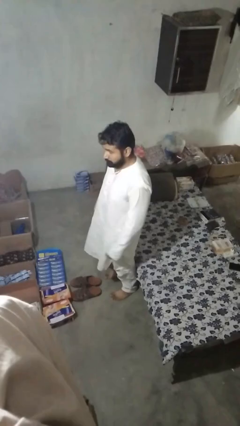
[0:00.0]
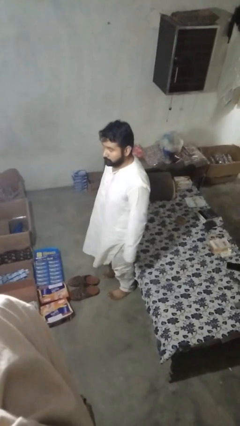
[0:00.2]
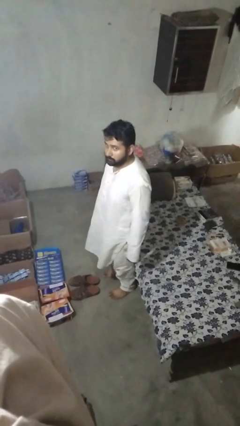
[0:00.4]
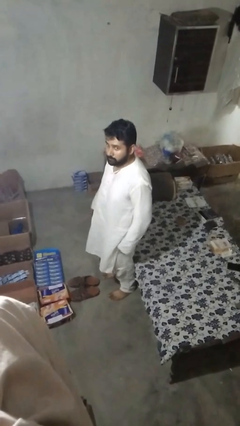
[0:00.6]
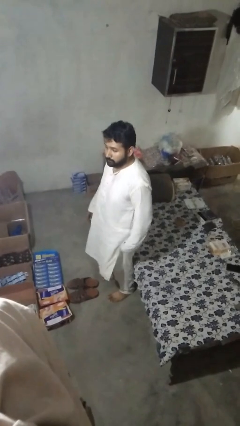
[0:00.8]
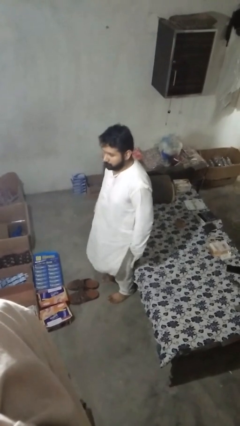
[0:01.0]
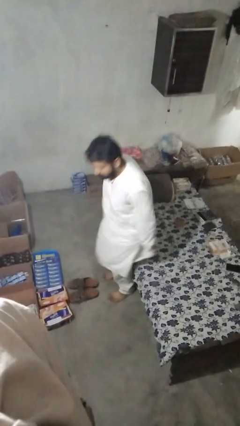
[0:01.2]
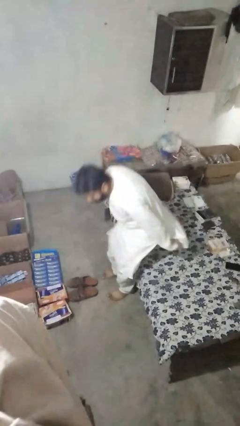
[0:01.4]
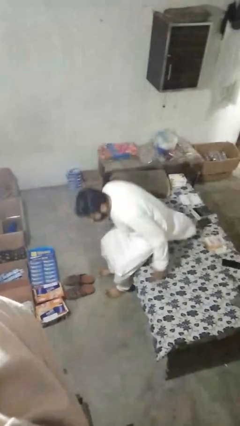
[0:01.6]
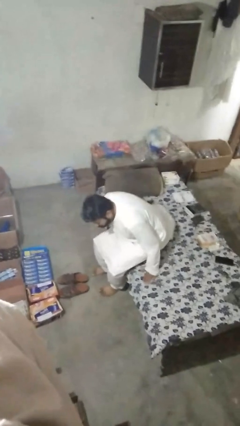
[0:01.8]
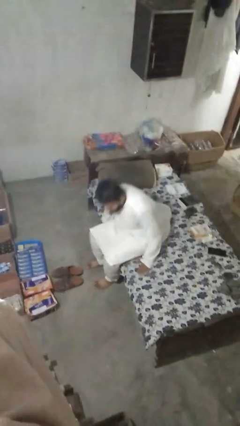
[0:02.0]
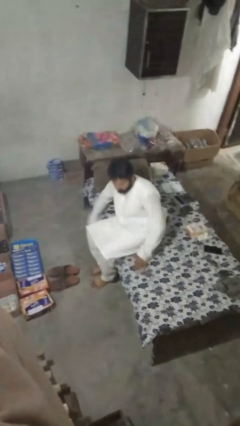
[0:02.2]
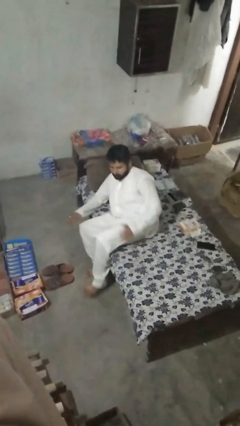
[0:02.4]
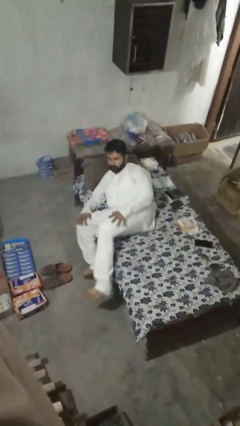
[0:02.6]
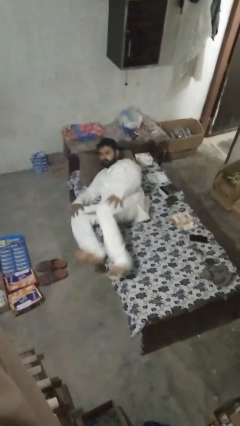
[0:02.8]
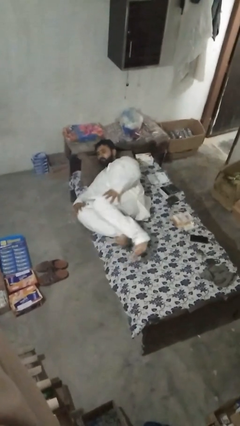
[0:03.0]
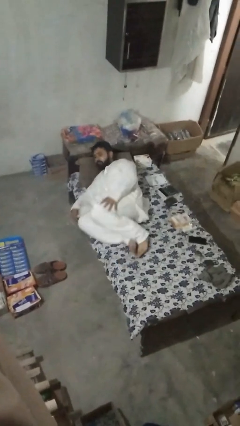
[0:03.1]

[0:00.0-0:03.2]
person lies down on bed

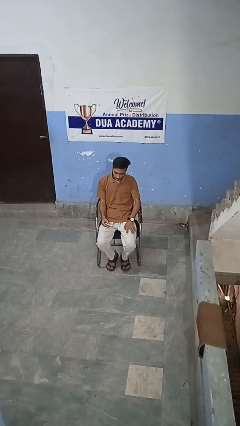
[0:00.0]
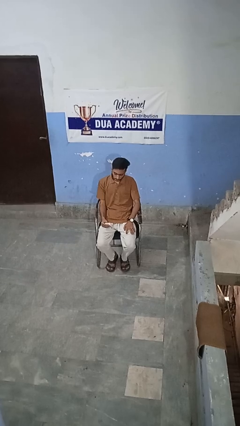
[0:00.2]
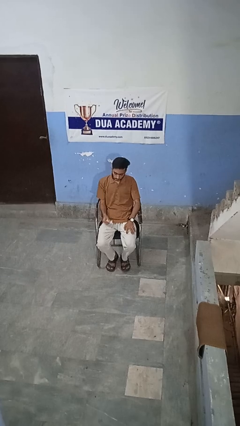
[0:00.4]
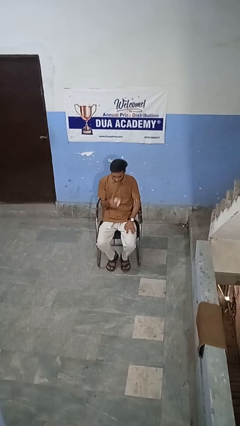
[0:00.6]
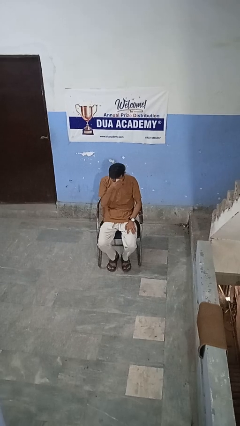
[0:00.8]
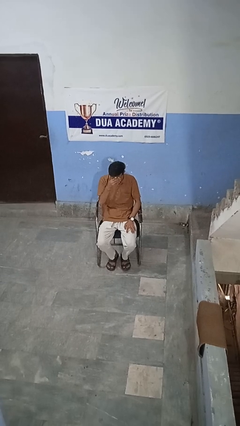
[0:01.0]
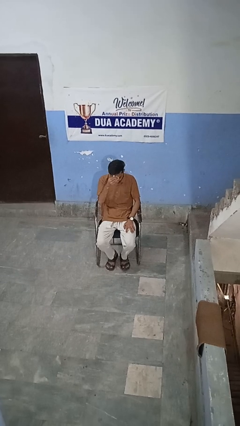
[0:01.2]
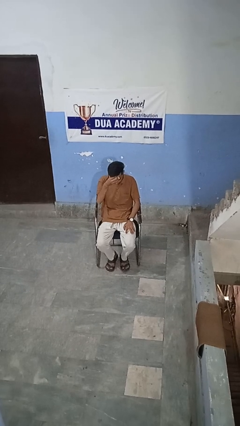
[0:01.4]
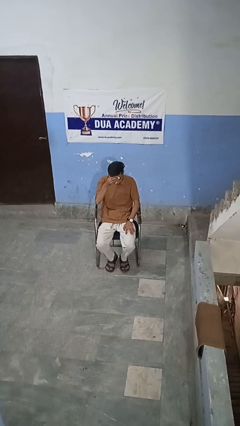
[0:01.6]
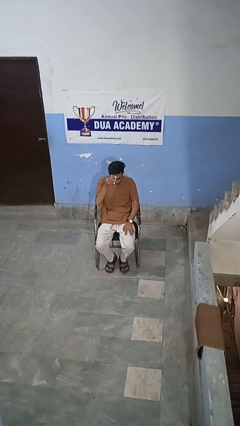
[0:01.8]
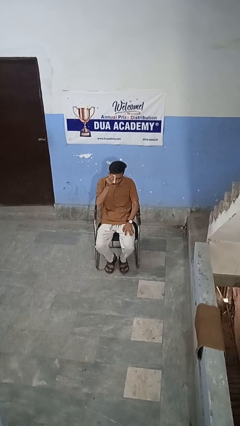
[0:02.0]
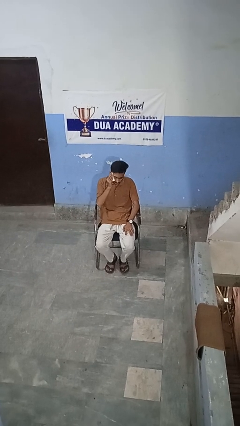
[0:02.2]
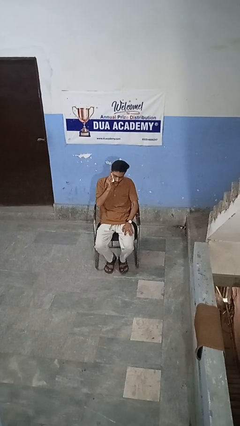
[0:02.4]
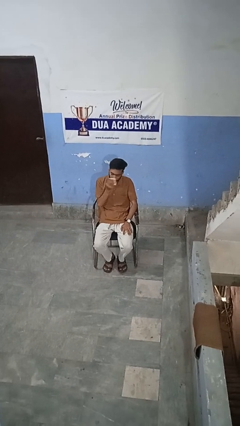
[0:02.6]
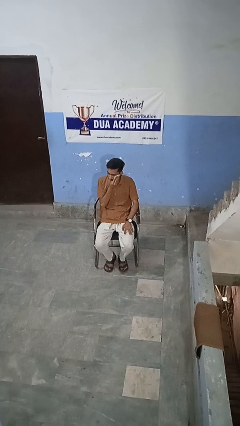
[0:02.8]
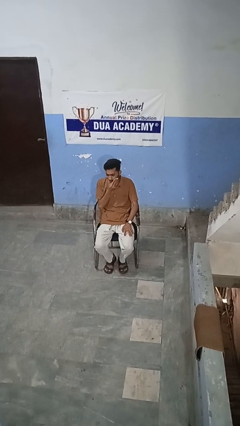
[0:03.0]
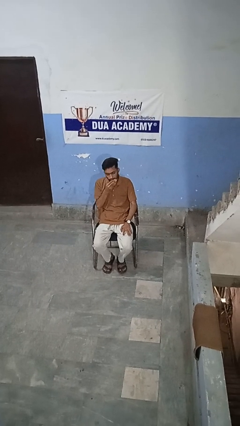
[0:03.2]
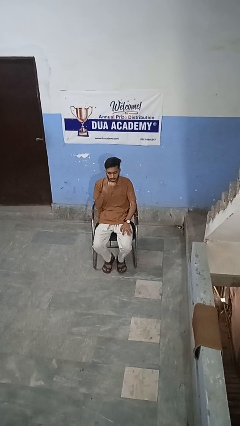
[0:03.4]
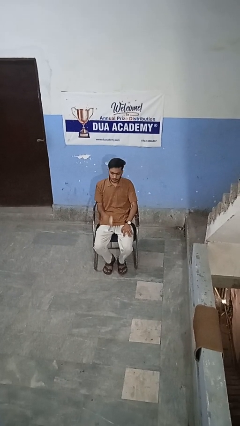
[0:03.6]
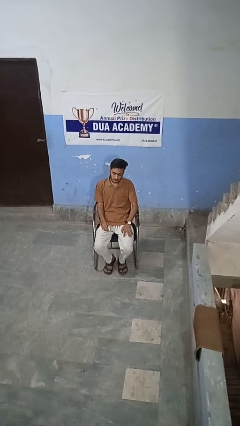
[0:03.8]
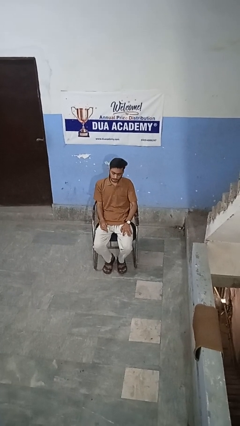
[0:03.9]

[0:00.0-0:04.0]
person wipes mouth with napkin

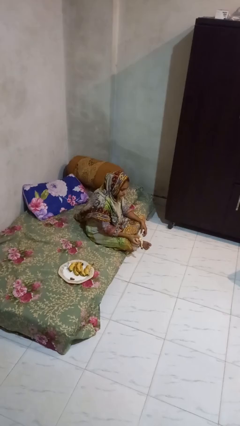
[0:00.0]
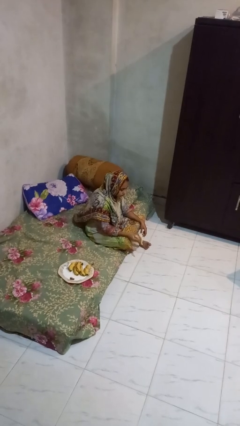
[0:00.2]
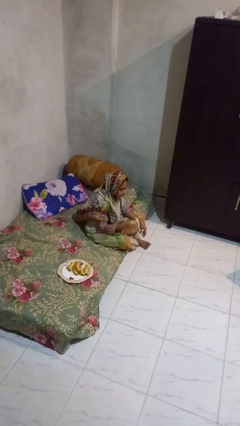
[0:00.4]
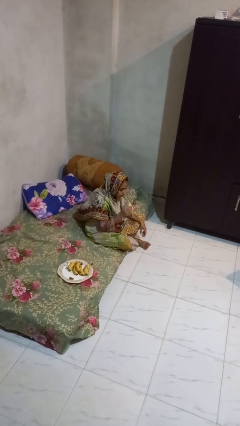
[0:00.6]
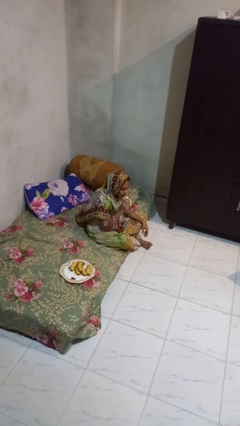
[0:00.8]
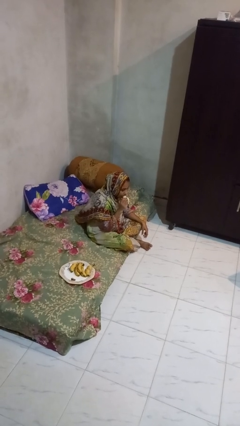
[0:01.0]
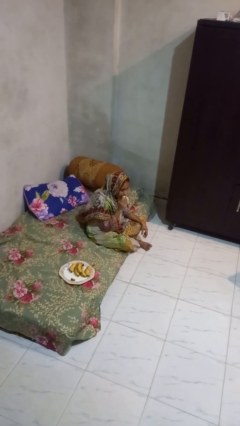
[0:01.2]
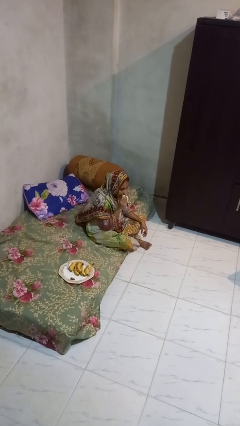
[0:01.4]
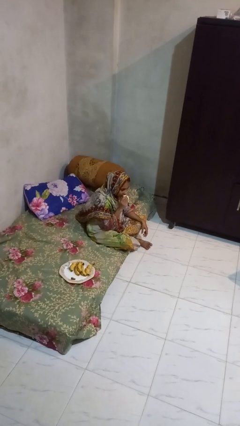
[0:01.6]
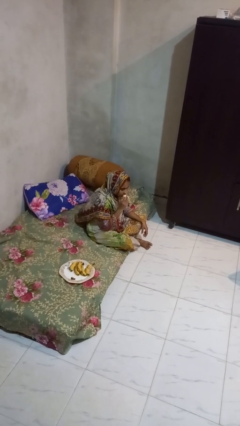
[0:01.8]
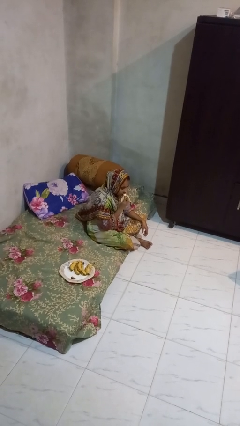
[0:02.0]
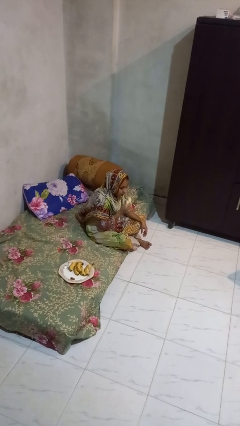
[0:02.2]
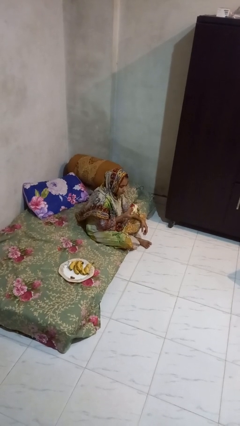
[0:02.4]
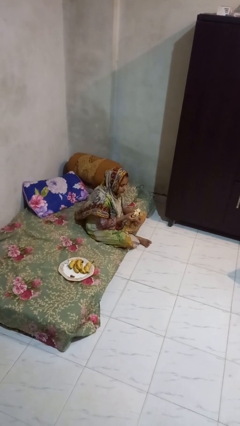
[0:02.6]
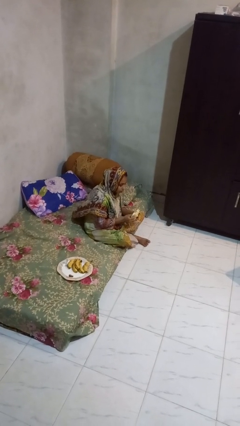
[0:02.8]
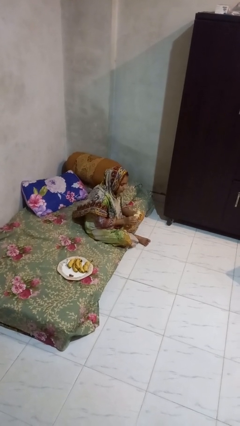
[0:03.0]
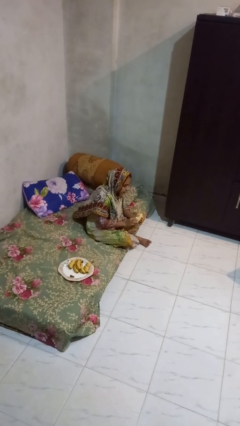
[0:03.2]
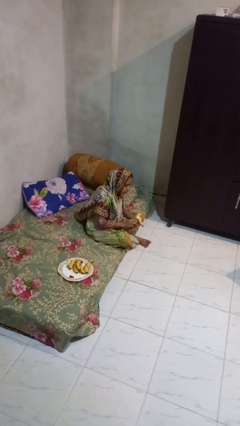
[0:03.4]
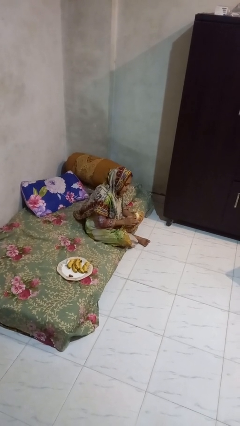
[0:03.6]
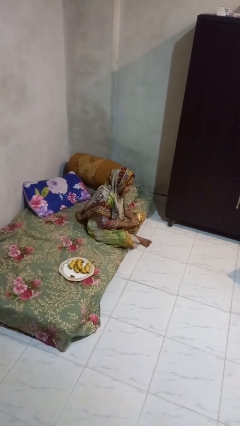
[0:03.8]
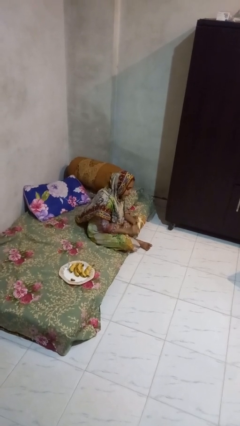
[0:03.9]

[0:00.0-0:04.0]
person eats banana

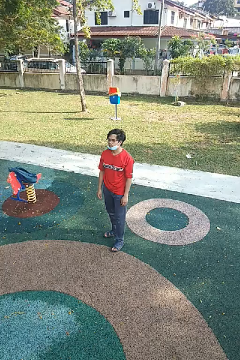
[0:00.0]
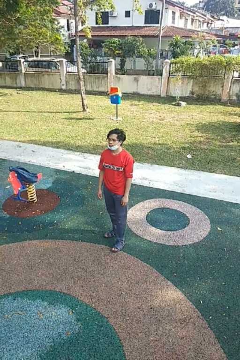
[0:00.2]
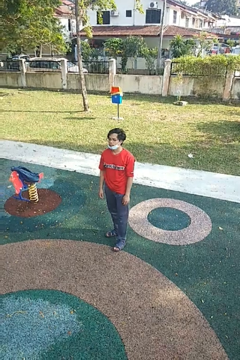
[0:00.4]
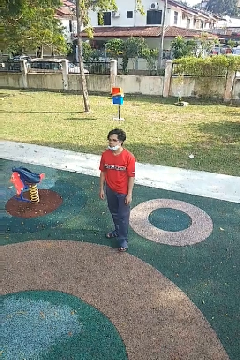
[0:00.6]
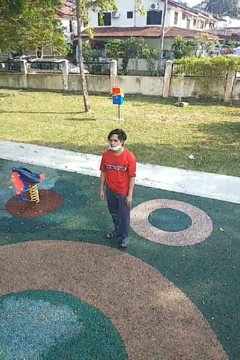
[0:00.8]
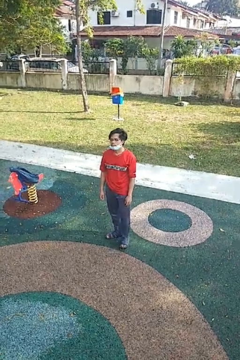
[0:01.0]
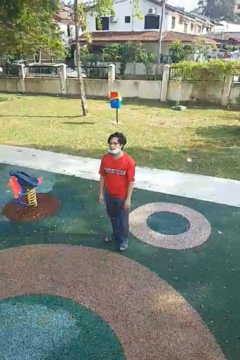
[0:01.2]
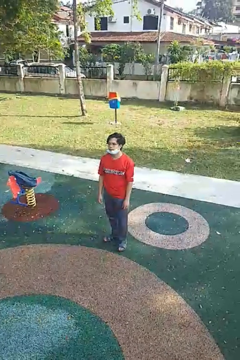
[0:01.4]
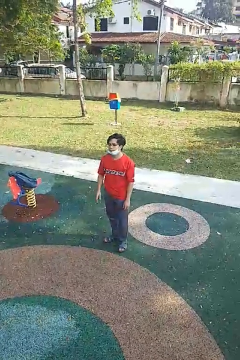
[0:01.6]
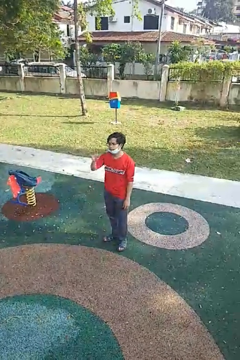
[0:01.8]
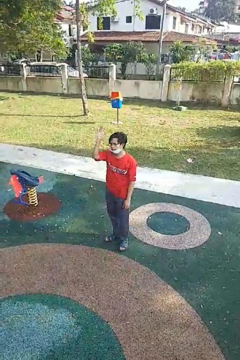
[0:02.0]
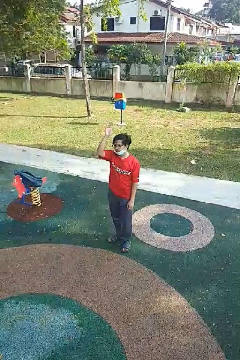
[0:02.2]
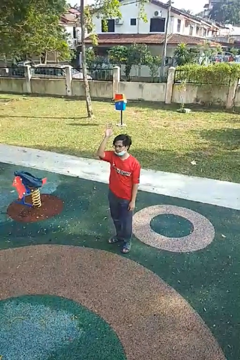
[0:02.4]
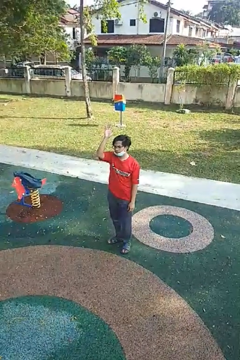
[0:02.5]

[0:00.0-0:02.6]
person gestures raise hand

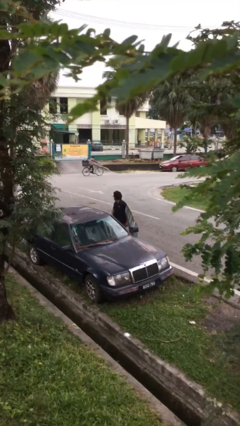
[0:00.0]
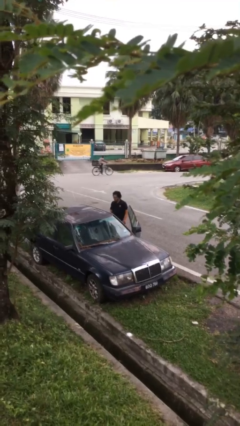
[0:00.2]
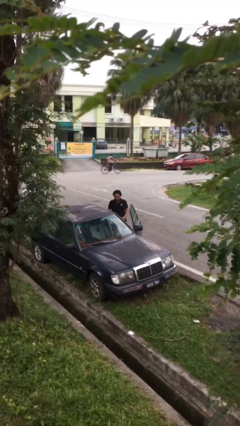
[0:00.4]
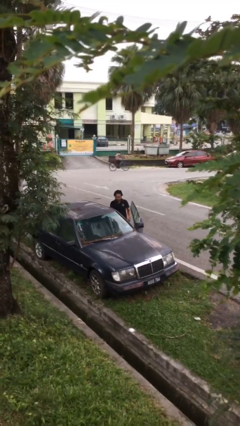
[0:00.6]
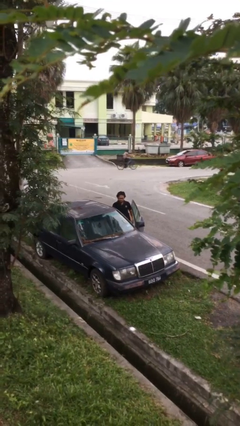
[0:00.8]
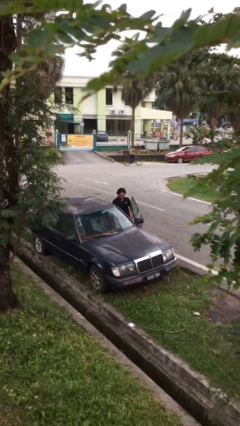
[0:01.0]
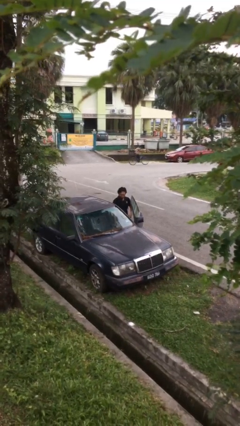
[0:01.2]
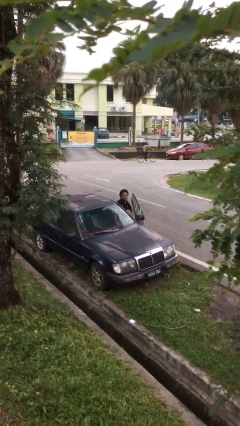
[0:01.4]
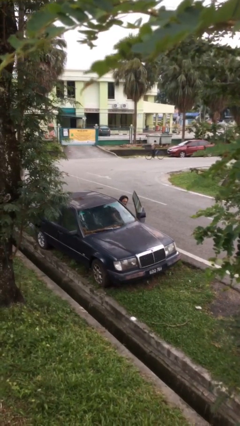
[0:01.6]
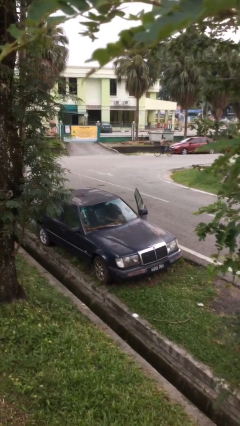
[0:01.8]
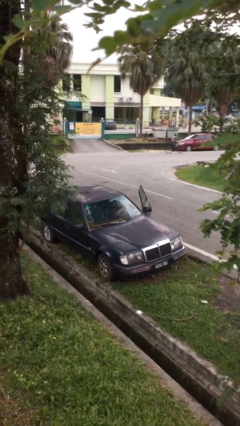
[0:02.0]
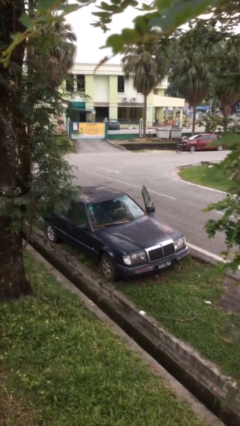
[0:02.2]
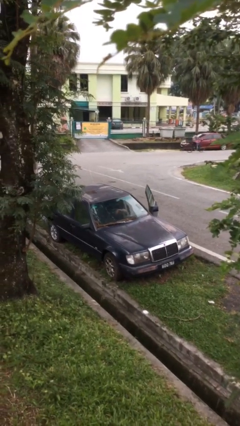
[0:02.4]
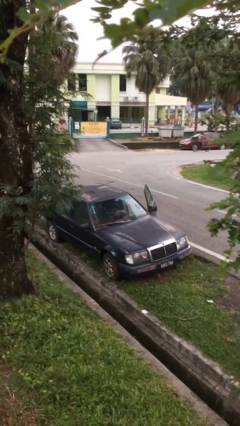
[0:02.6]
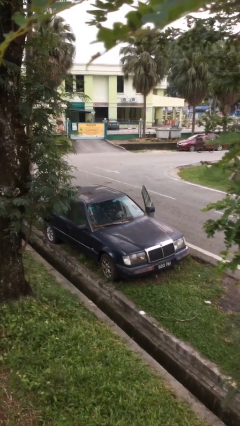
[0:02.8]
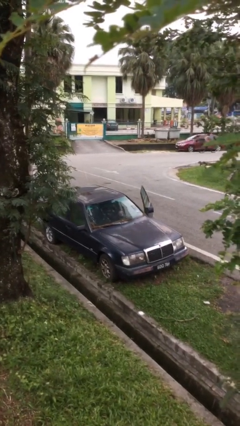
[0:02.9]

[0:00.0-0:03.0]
person enters car

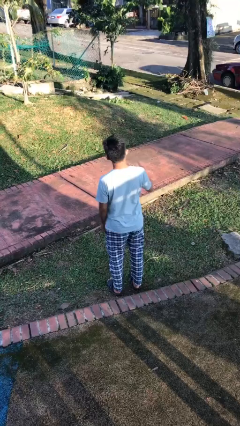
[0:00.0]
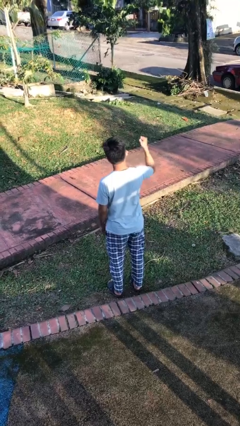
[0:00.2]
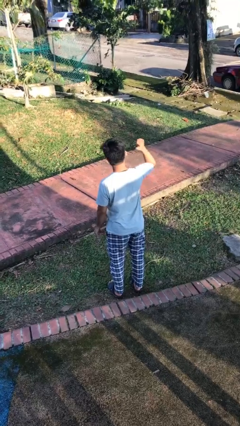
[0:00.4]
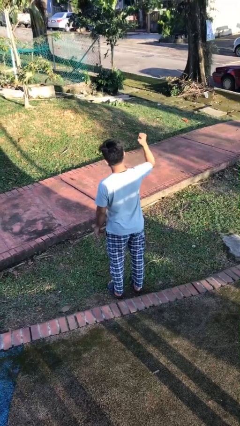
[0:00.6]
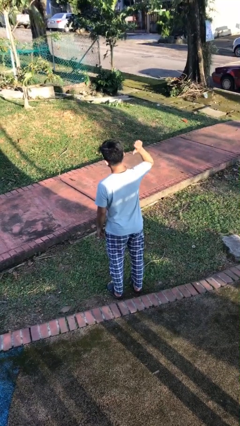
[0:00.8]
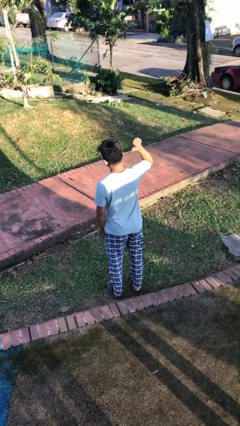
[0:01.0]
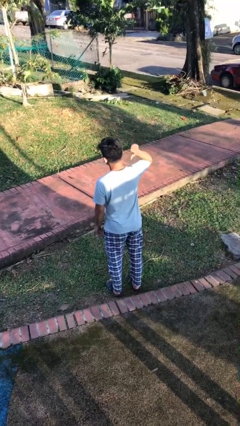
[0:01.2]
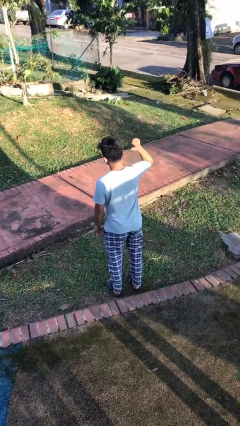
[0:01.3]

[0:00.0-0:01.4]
person gestures behind me

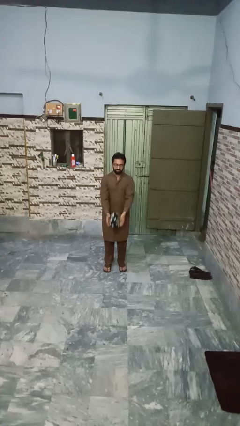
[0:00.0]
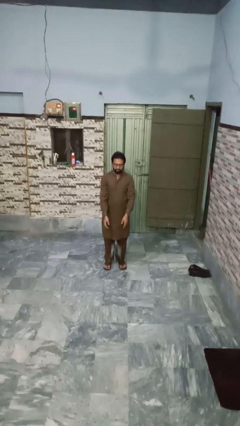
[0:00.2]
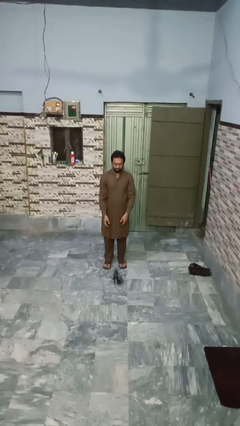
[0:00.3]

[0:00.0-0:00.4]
person catches dropped object
